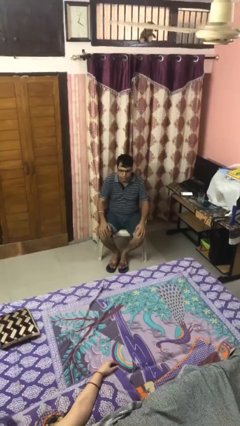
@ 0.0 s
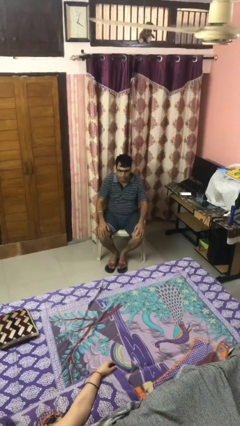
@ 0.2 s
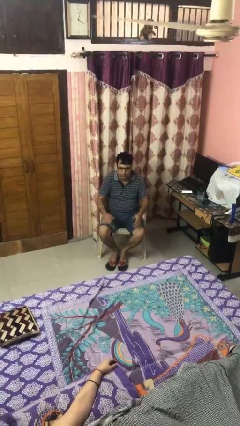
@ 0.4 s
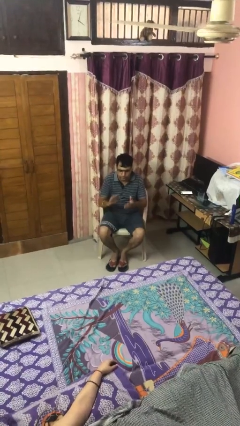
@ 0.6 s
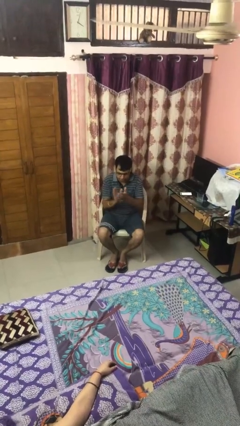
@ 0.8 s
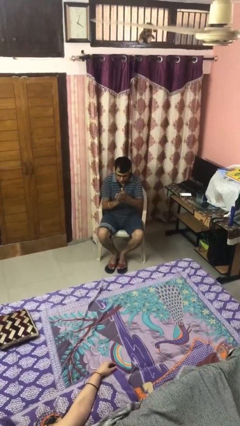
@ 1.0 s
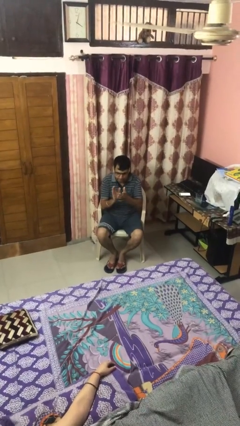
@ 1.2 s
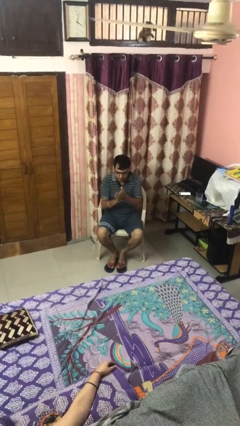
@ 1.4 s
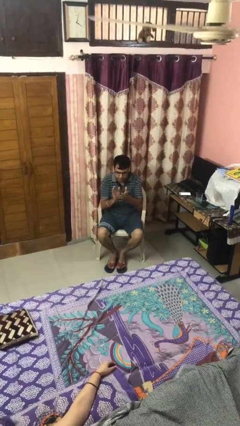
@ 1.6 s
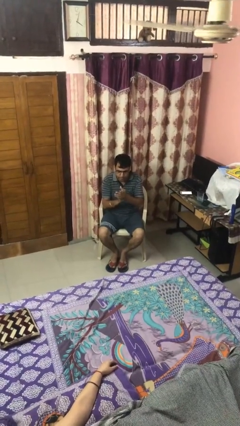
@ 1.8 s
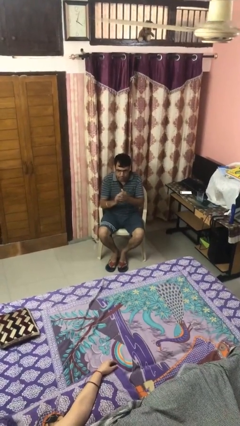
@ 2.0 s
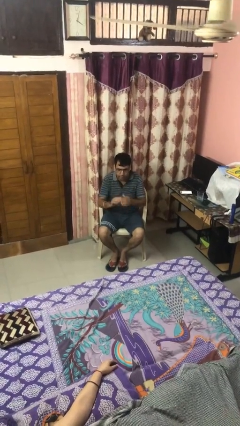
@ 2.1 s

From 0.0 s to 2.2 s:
person claps hands

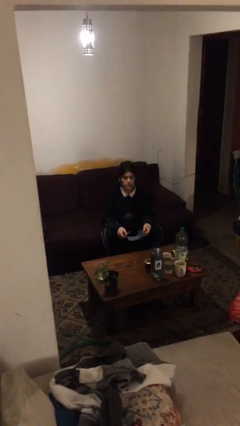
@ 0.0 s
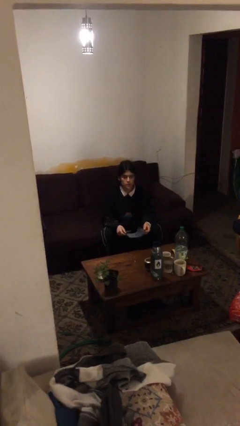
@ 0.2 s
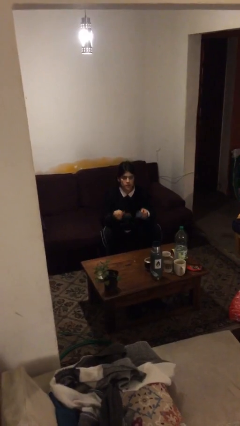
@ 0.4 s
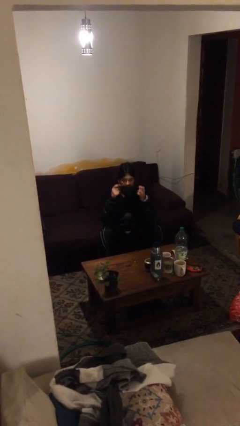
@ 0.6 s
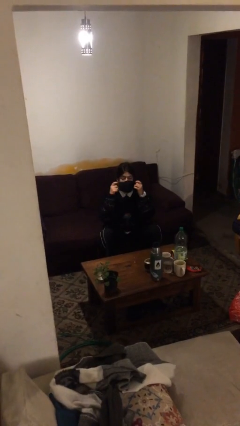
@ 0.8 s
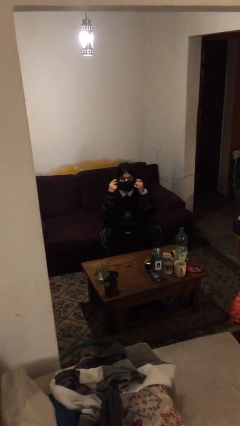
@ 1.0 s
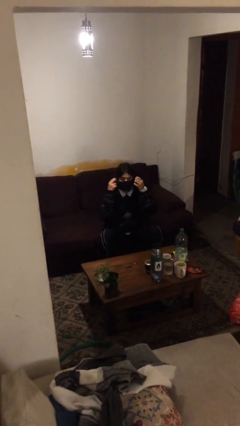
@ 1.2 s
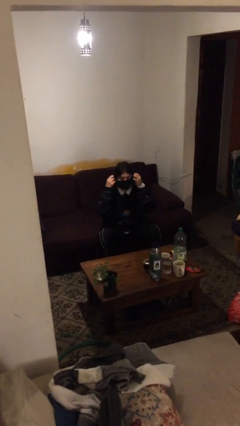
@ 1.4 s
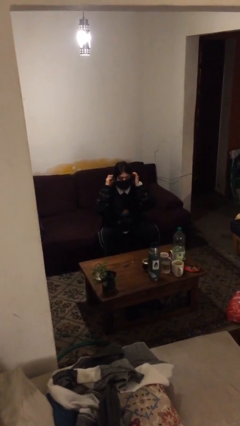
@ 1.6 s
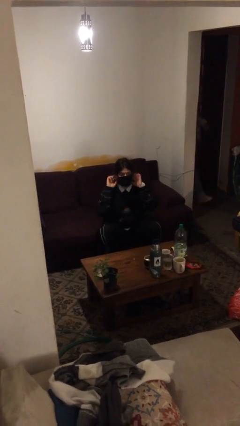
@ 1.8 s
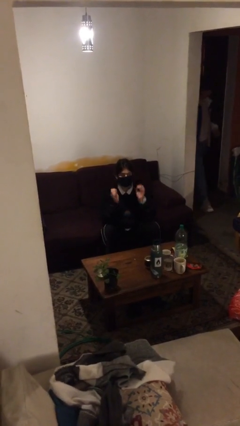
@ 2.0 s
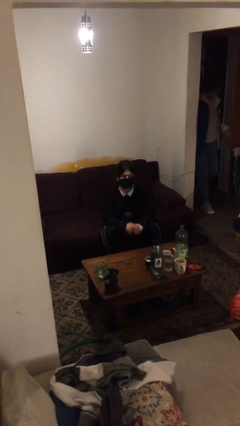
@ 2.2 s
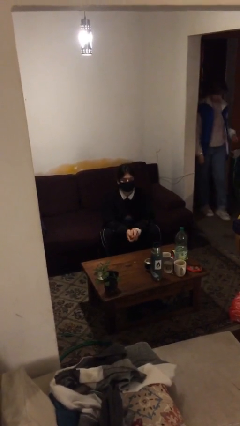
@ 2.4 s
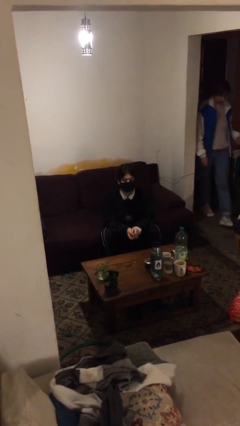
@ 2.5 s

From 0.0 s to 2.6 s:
person puts on facemask

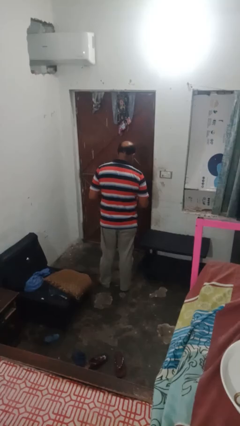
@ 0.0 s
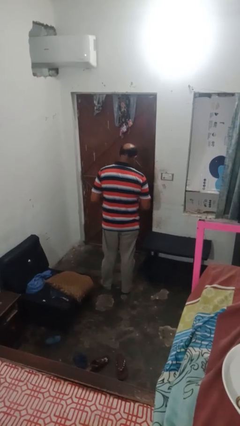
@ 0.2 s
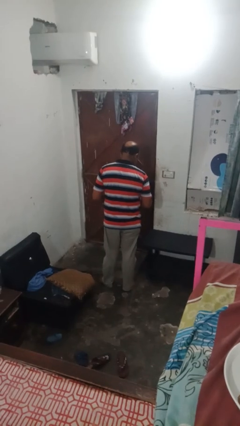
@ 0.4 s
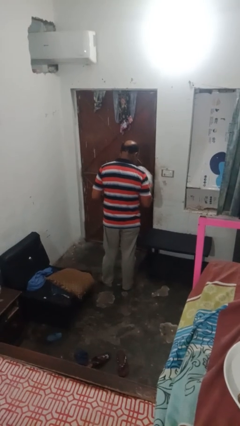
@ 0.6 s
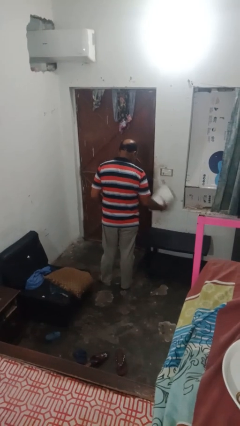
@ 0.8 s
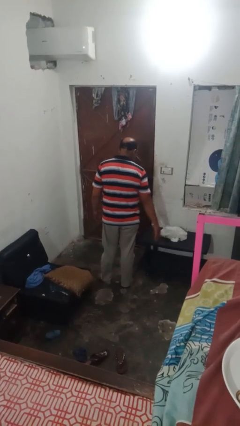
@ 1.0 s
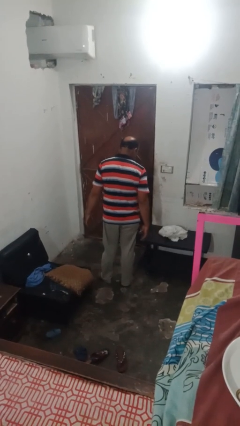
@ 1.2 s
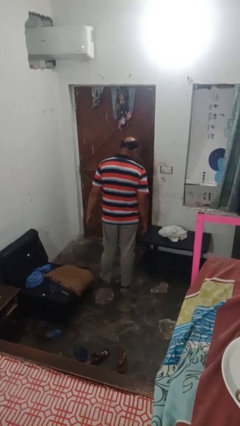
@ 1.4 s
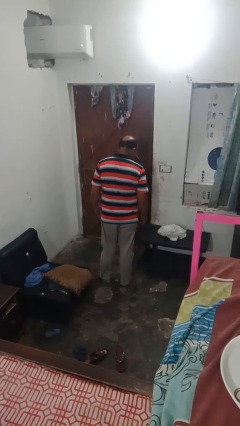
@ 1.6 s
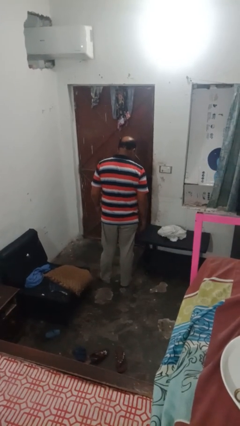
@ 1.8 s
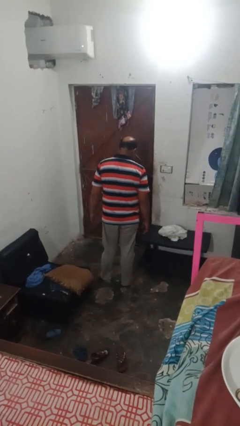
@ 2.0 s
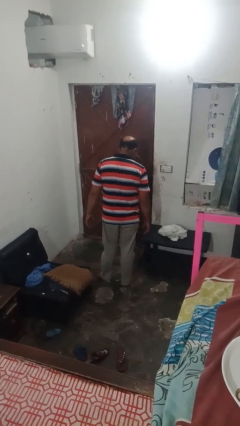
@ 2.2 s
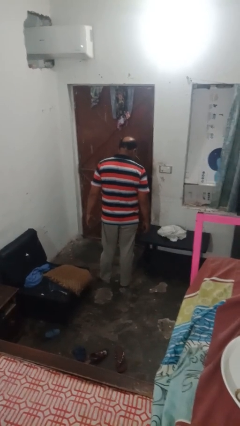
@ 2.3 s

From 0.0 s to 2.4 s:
person throws object on table

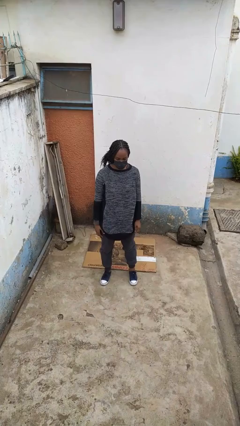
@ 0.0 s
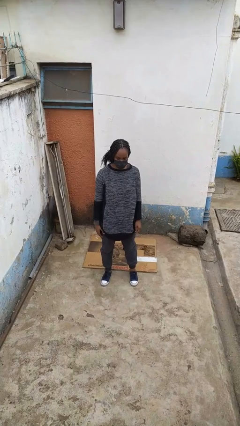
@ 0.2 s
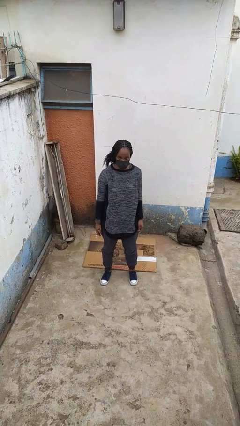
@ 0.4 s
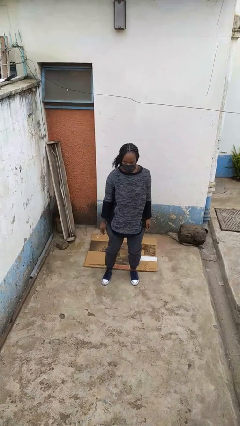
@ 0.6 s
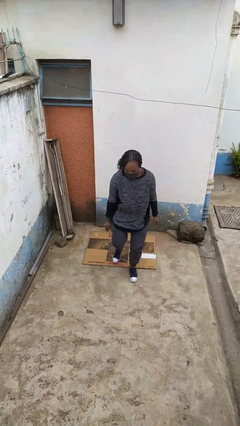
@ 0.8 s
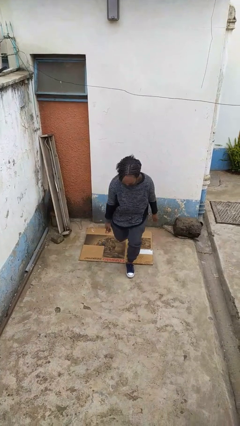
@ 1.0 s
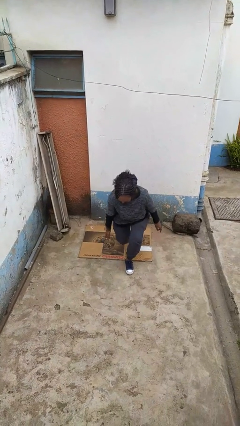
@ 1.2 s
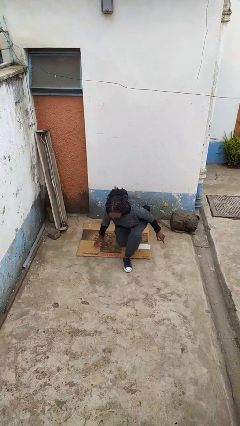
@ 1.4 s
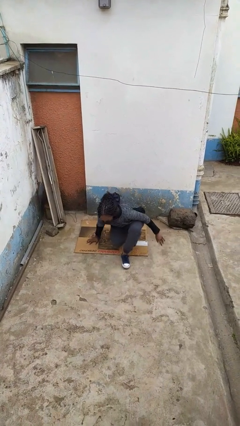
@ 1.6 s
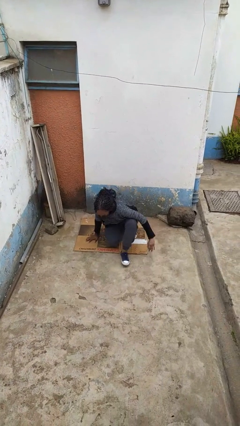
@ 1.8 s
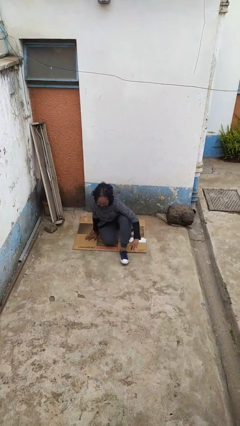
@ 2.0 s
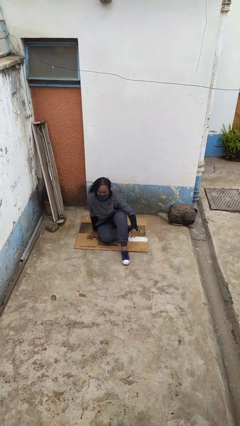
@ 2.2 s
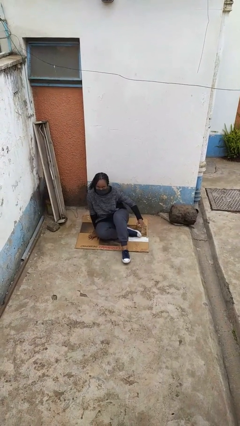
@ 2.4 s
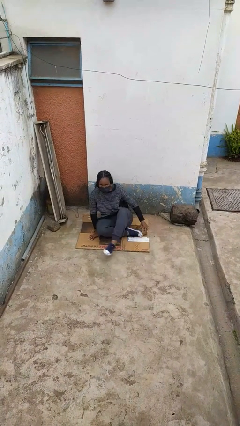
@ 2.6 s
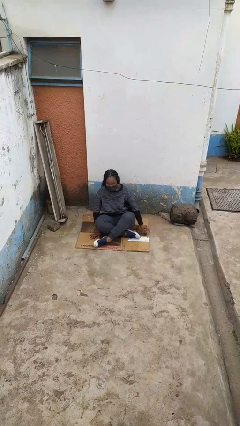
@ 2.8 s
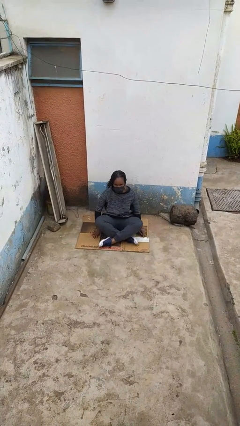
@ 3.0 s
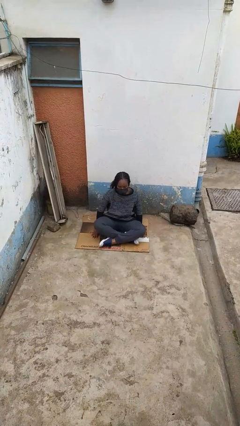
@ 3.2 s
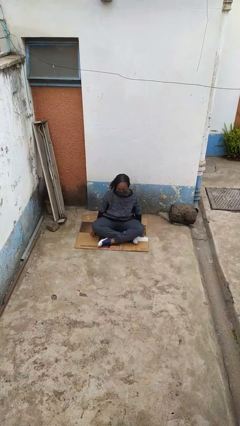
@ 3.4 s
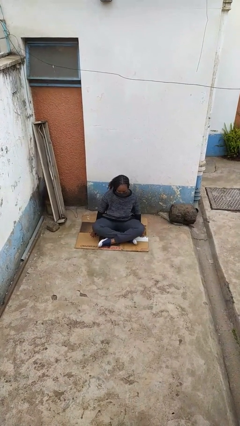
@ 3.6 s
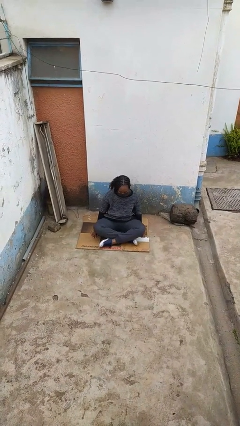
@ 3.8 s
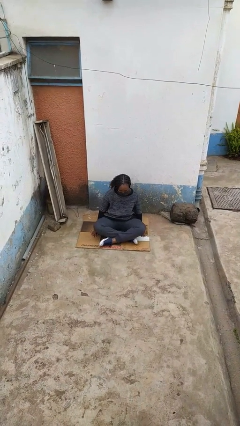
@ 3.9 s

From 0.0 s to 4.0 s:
person sits crisscross

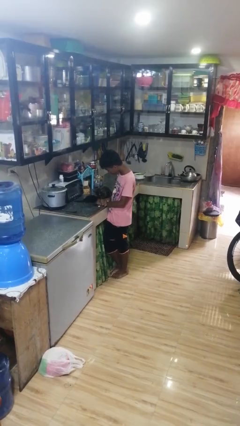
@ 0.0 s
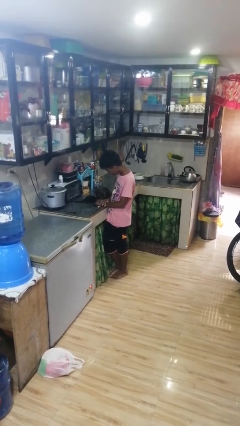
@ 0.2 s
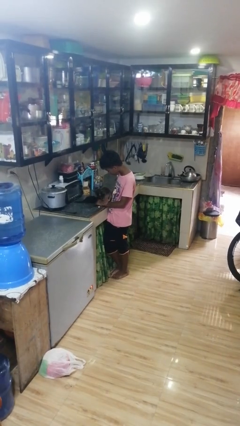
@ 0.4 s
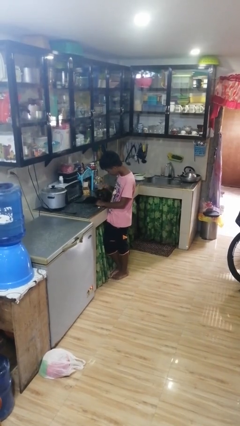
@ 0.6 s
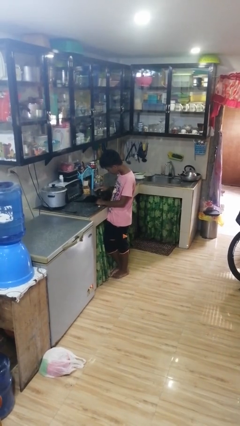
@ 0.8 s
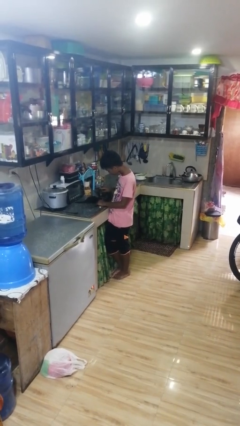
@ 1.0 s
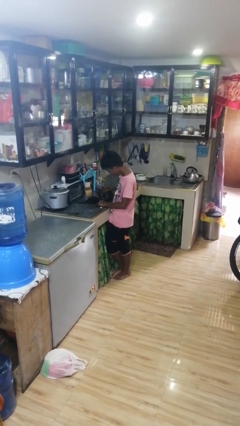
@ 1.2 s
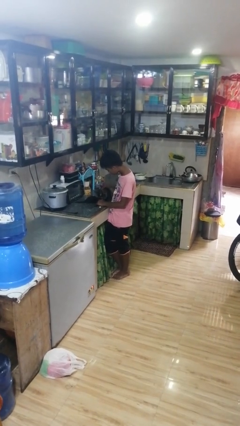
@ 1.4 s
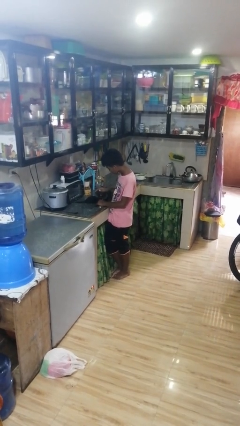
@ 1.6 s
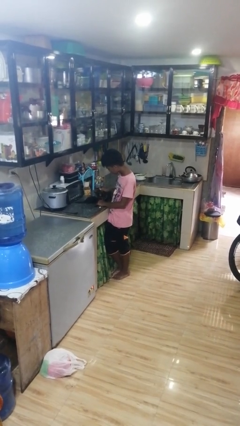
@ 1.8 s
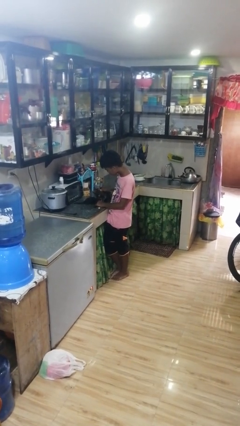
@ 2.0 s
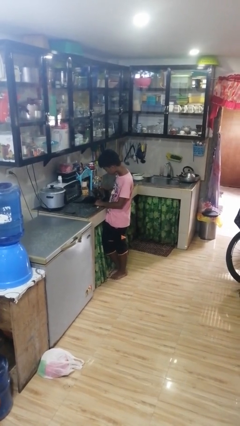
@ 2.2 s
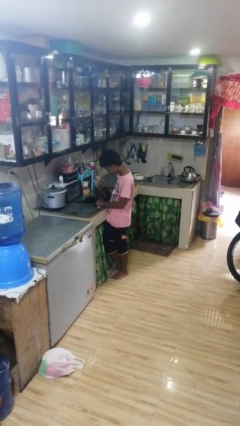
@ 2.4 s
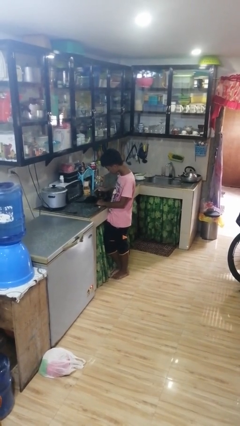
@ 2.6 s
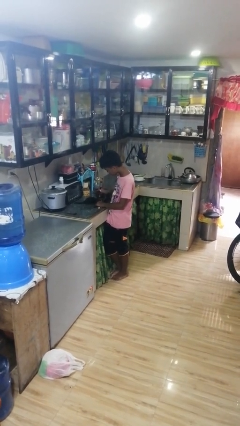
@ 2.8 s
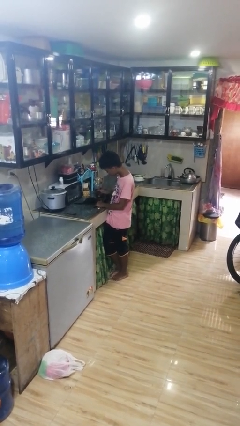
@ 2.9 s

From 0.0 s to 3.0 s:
person pets cat

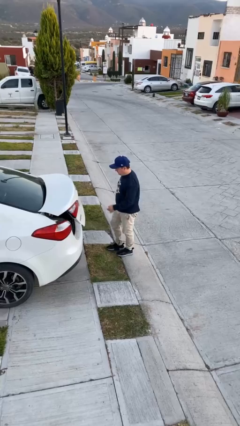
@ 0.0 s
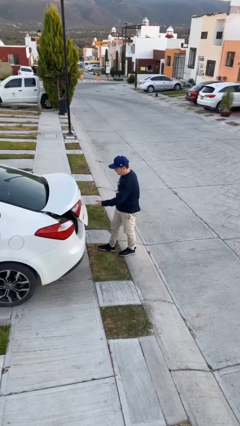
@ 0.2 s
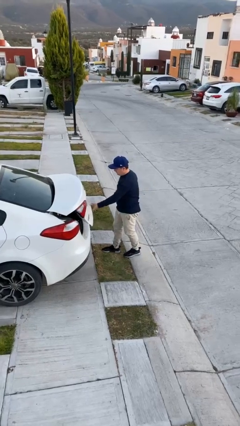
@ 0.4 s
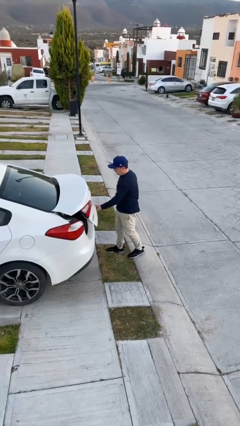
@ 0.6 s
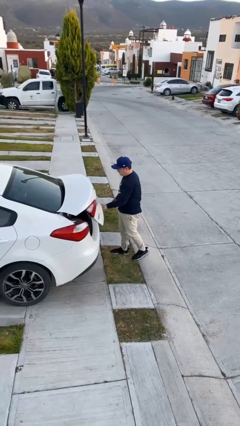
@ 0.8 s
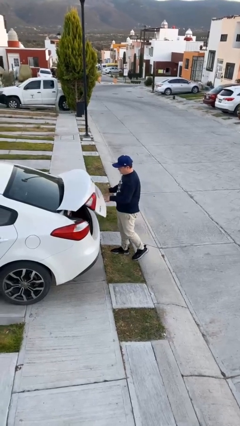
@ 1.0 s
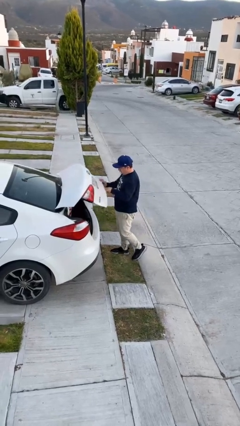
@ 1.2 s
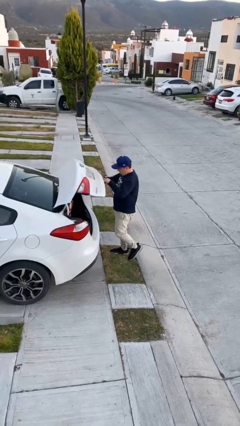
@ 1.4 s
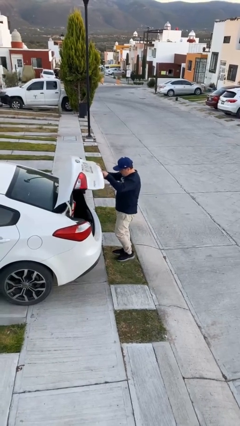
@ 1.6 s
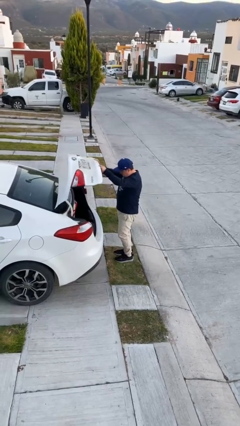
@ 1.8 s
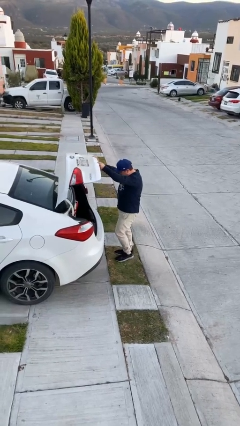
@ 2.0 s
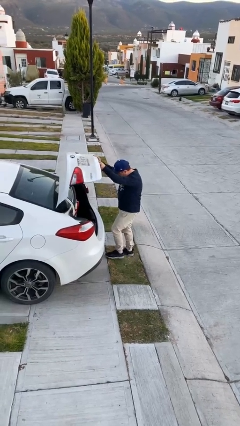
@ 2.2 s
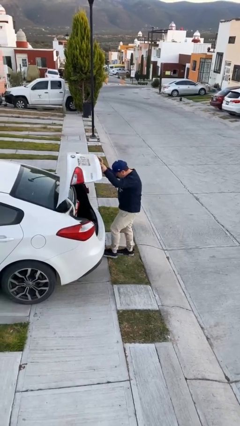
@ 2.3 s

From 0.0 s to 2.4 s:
person opens car trunk

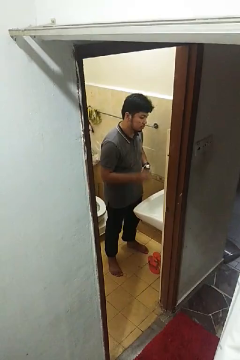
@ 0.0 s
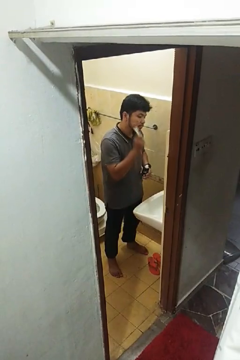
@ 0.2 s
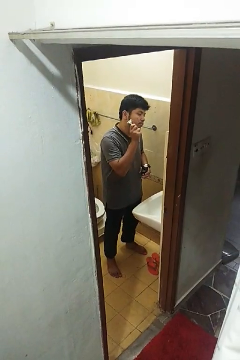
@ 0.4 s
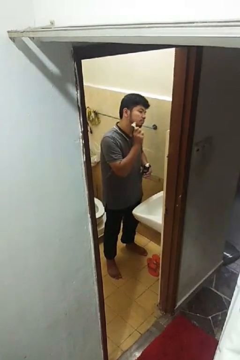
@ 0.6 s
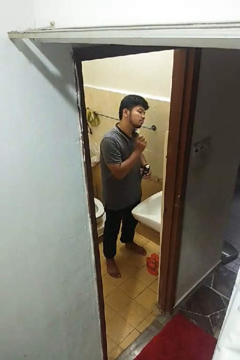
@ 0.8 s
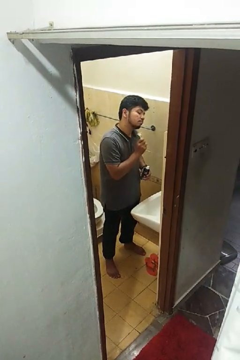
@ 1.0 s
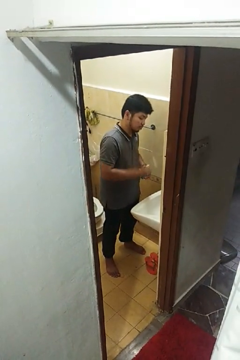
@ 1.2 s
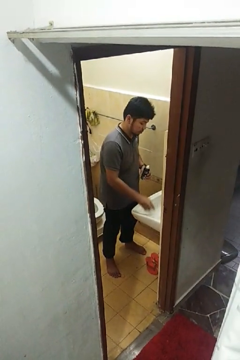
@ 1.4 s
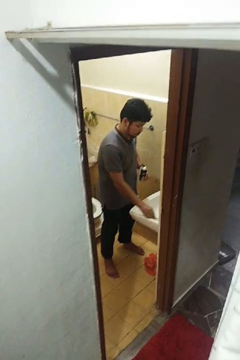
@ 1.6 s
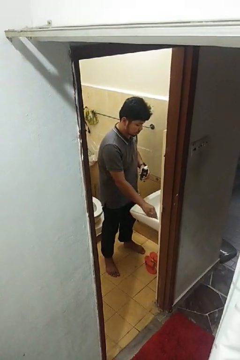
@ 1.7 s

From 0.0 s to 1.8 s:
person shaves face
